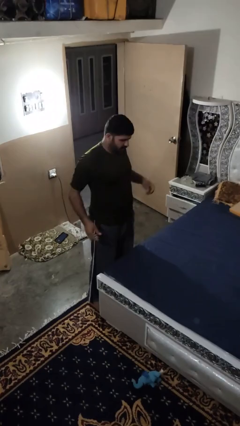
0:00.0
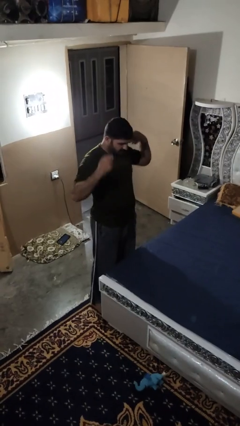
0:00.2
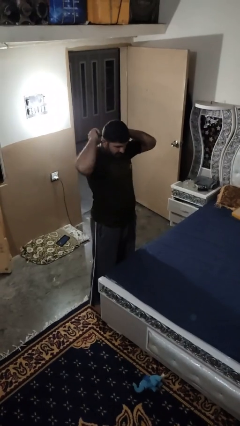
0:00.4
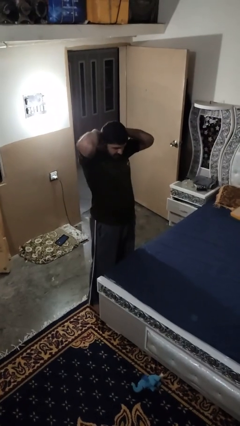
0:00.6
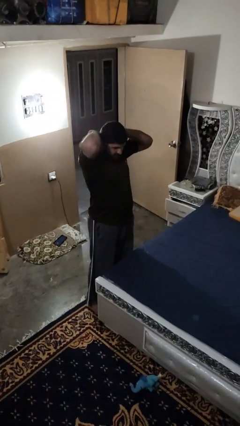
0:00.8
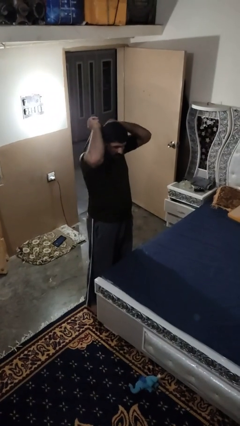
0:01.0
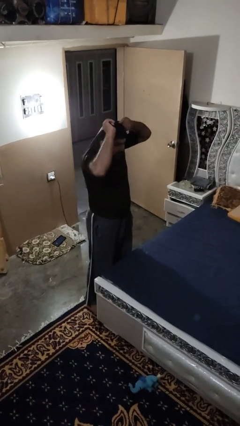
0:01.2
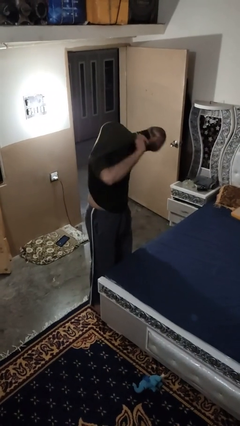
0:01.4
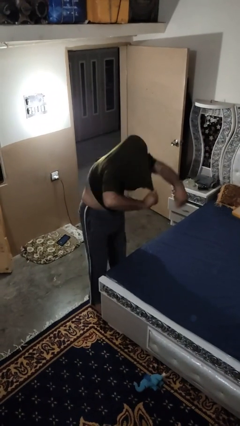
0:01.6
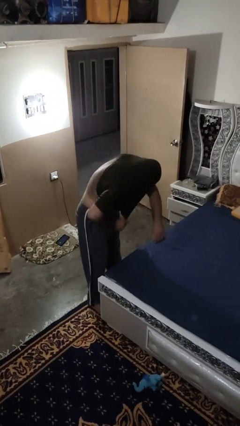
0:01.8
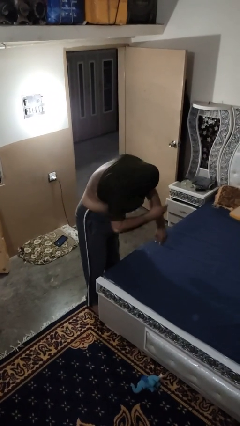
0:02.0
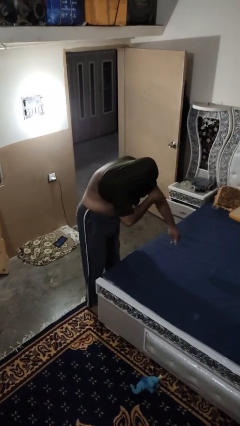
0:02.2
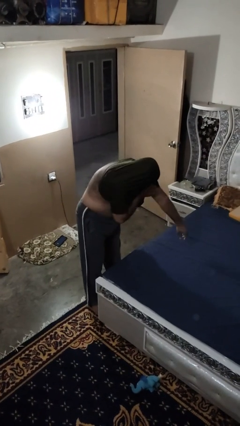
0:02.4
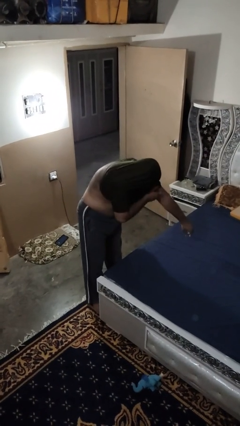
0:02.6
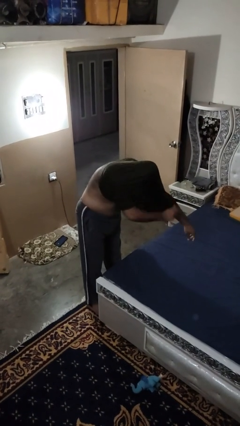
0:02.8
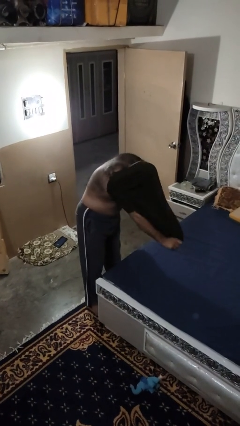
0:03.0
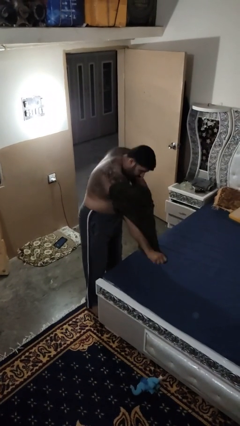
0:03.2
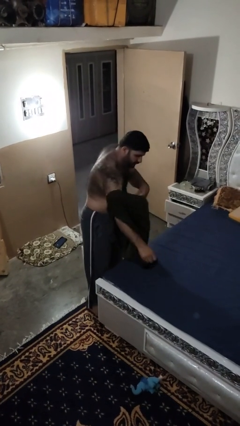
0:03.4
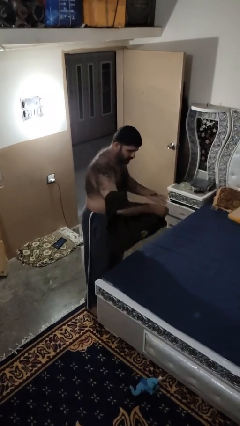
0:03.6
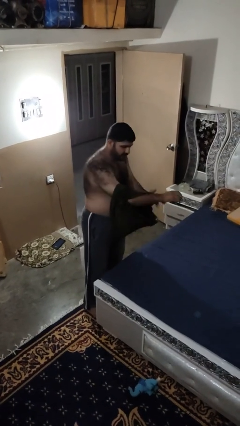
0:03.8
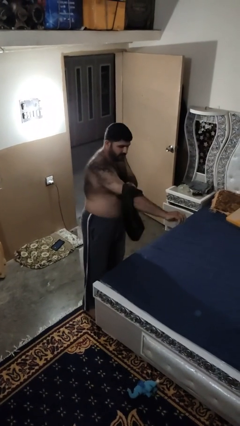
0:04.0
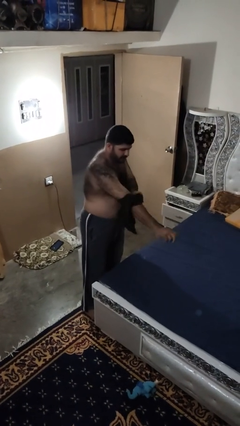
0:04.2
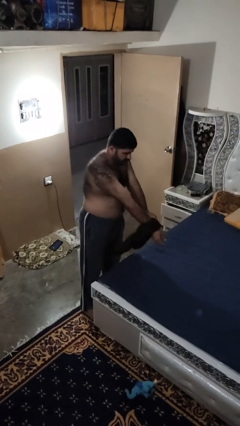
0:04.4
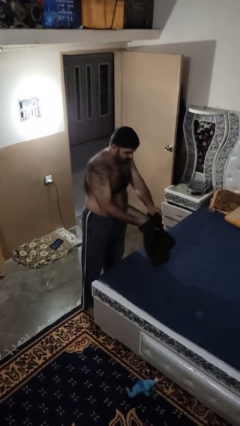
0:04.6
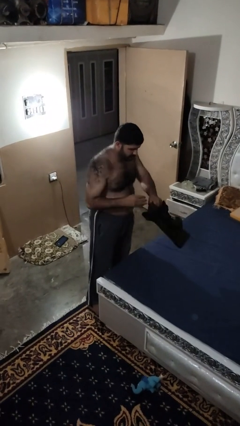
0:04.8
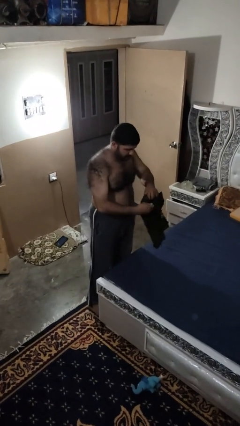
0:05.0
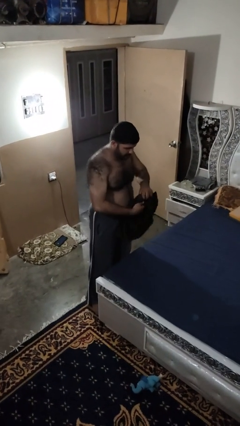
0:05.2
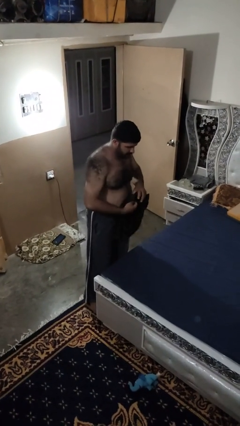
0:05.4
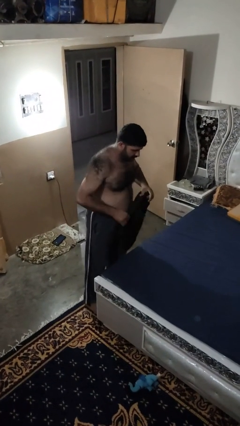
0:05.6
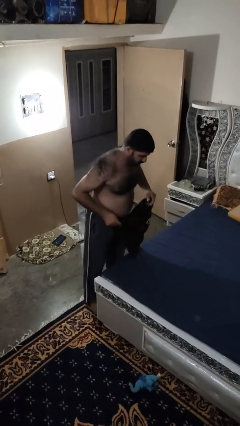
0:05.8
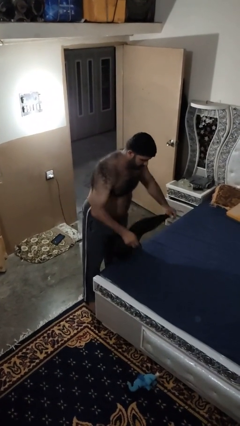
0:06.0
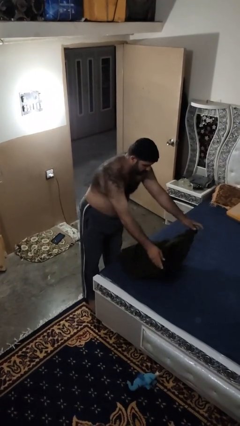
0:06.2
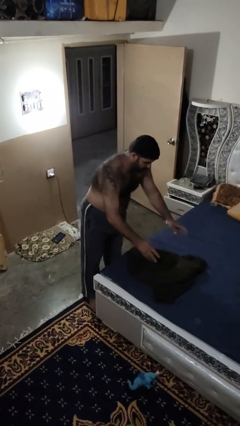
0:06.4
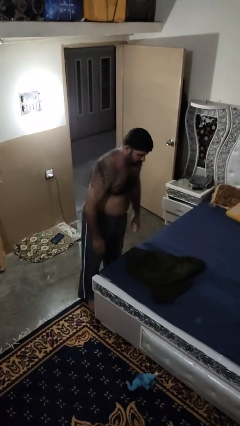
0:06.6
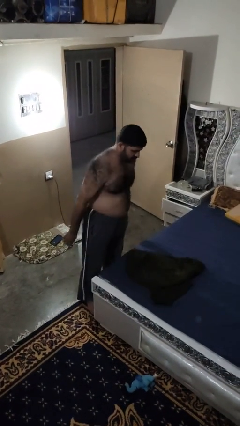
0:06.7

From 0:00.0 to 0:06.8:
person takes off shirt

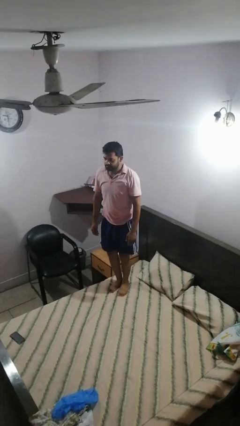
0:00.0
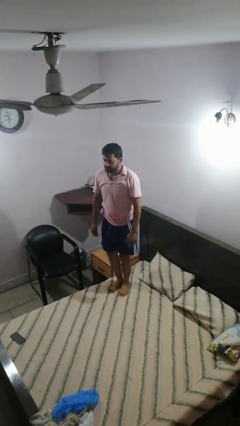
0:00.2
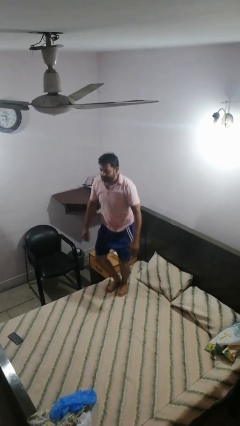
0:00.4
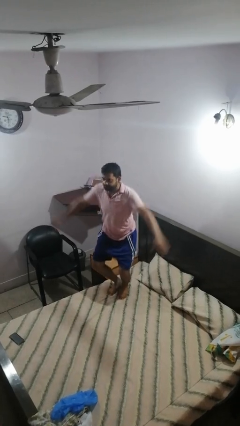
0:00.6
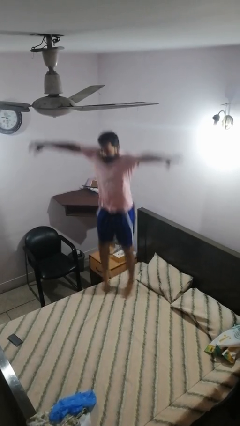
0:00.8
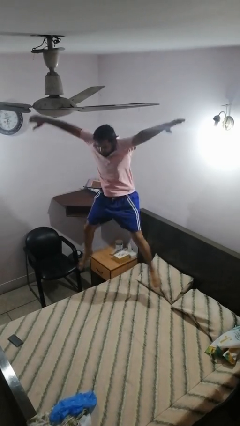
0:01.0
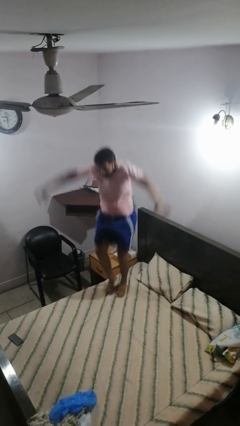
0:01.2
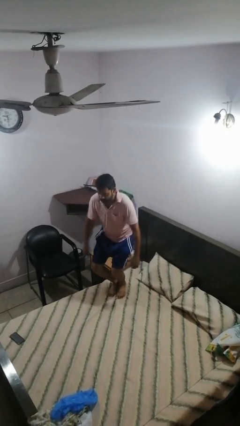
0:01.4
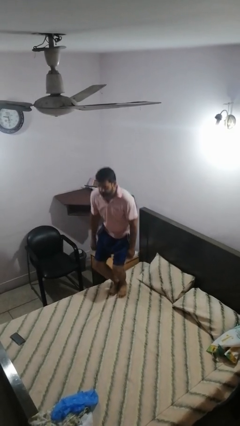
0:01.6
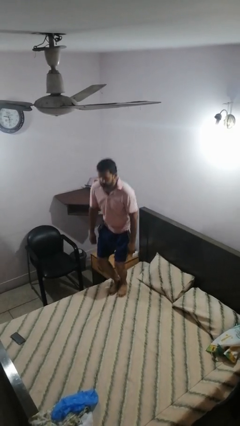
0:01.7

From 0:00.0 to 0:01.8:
person jumps on bed

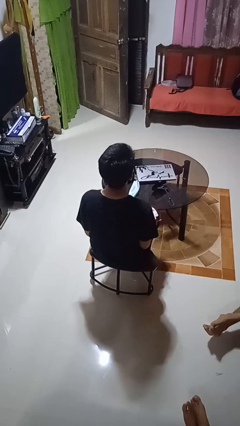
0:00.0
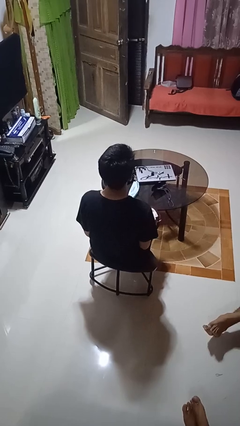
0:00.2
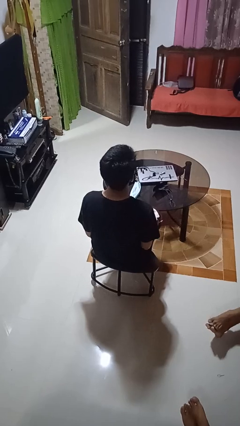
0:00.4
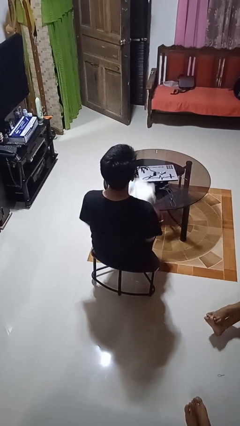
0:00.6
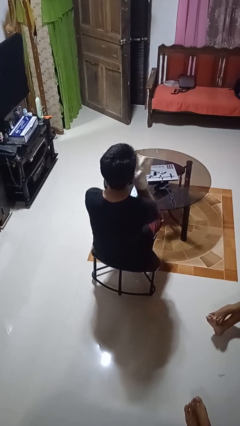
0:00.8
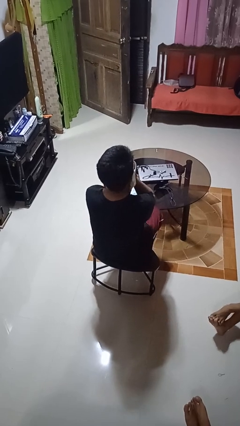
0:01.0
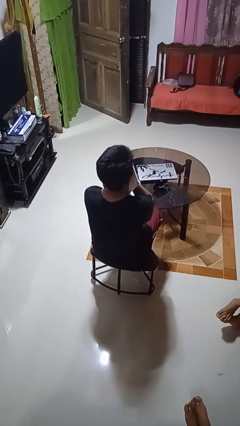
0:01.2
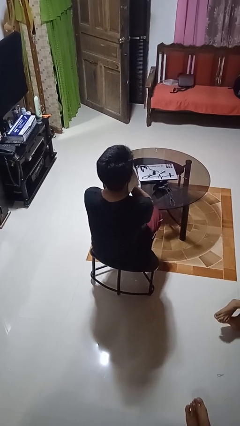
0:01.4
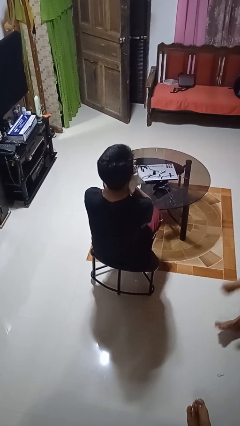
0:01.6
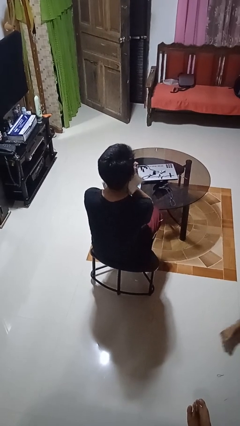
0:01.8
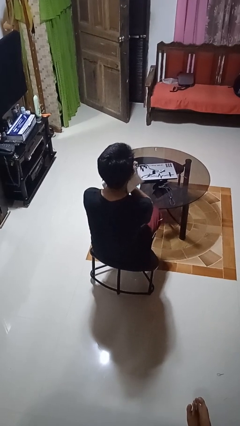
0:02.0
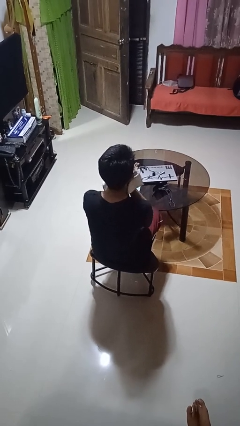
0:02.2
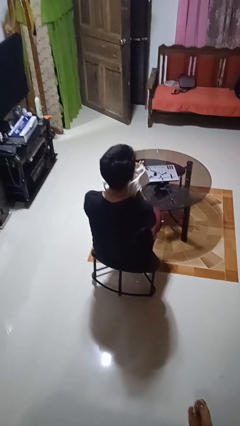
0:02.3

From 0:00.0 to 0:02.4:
person wipes mouth with napkin

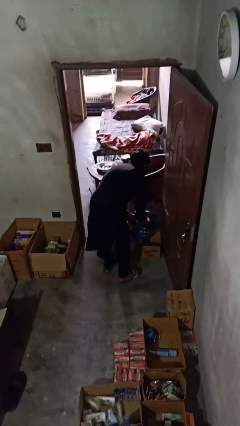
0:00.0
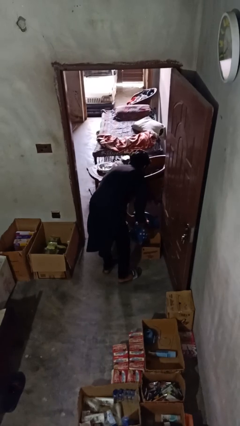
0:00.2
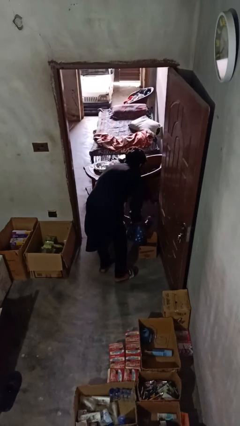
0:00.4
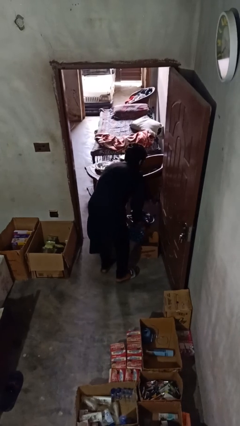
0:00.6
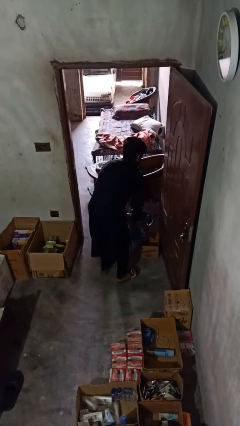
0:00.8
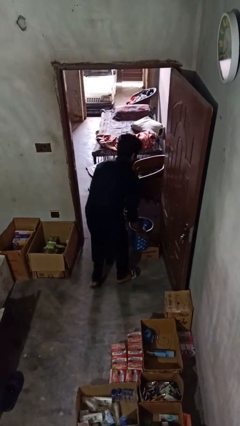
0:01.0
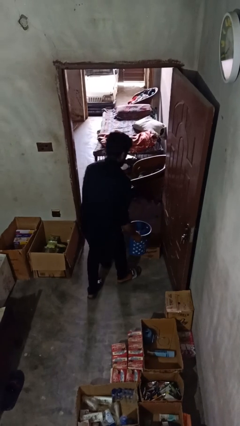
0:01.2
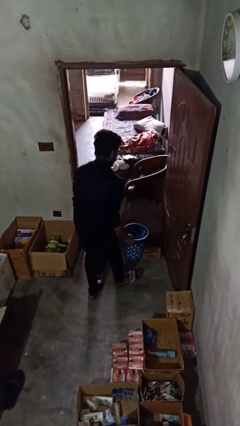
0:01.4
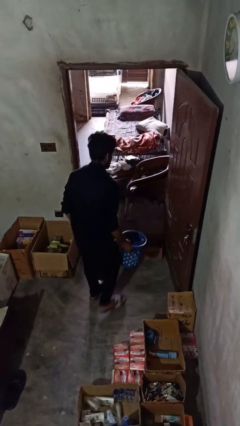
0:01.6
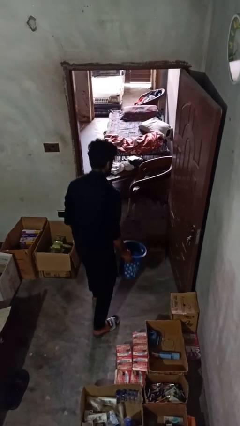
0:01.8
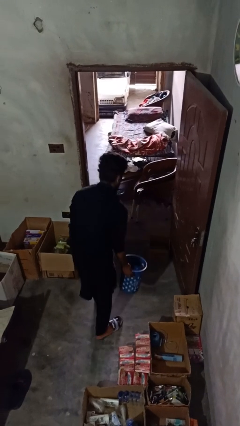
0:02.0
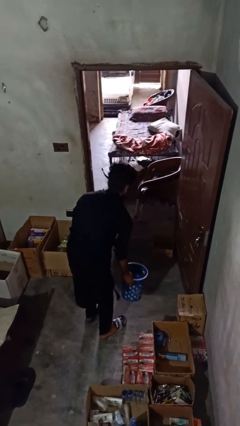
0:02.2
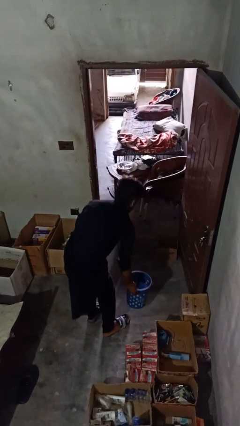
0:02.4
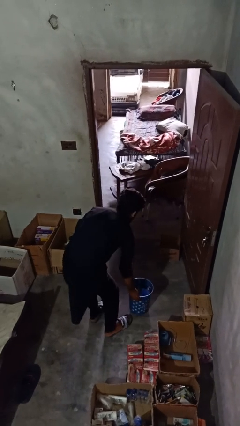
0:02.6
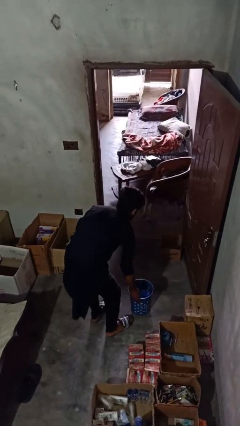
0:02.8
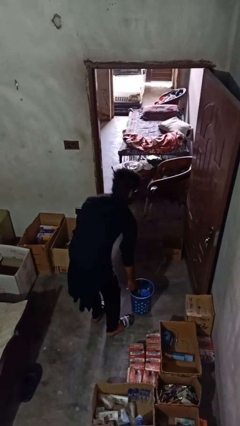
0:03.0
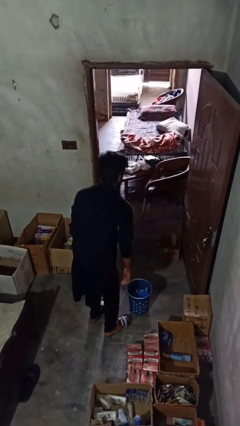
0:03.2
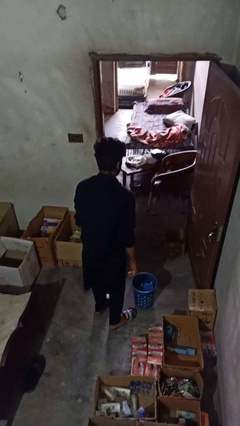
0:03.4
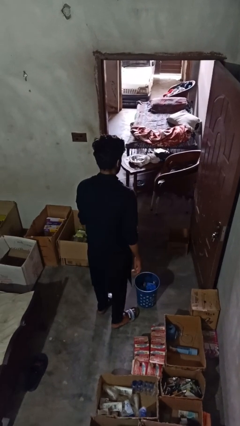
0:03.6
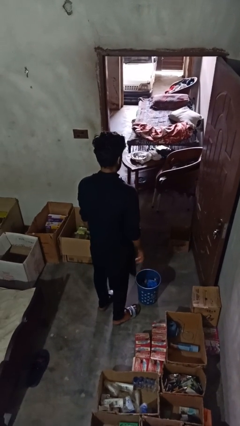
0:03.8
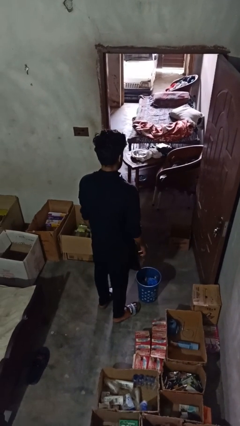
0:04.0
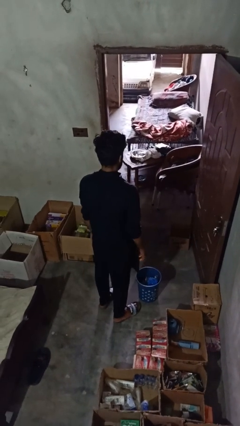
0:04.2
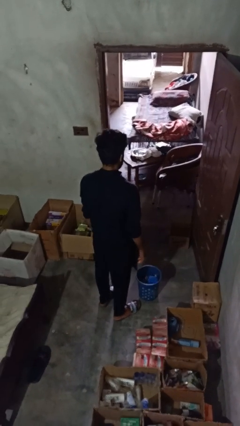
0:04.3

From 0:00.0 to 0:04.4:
person inserts trashbag into trashcan

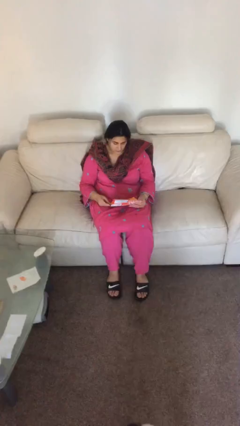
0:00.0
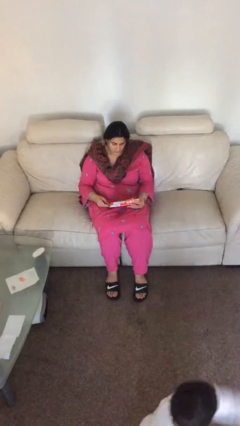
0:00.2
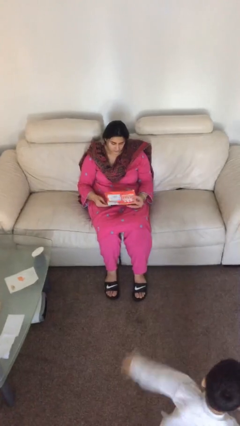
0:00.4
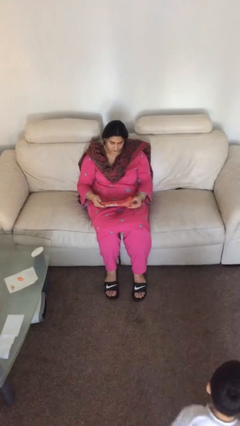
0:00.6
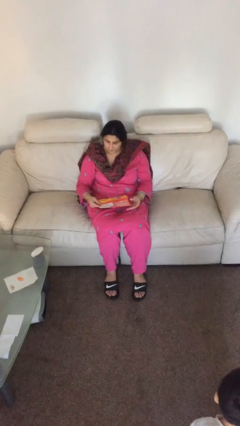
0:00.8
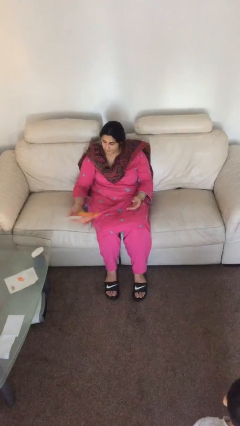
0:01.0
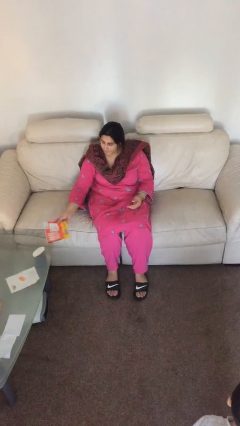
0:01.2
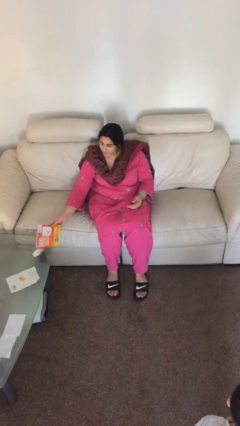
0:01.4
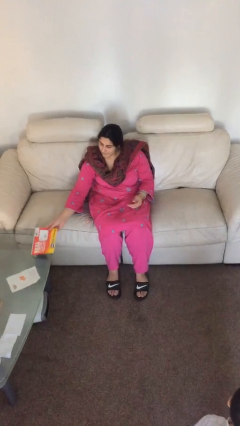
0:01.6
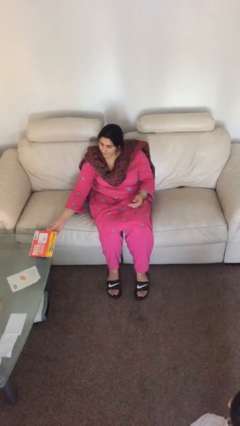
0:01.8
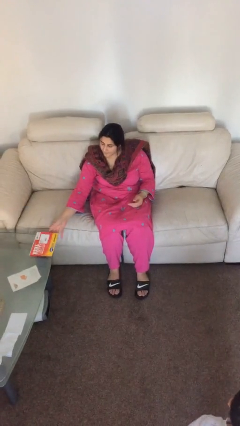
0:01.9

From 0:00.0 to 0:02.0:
person puts down object on table

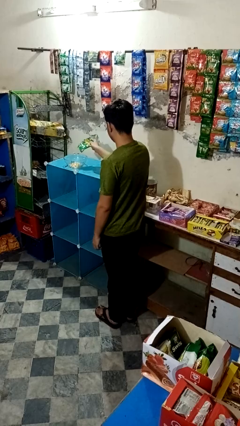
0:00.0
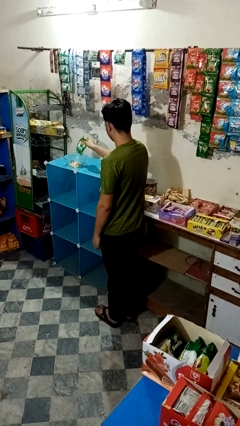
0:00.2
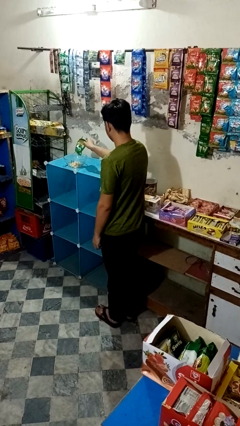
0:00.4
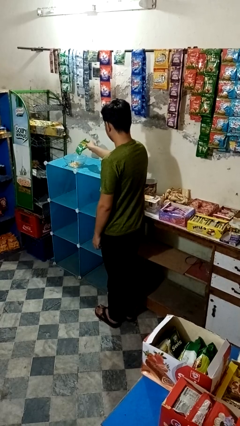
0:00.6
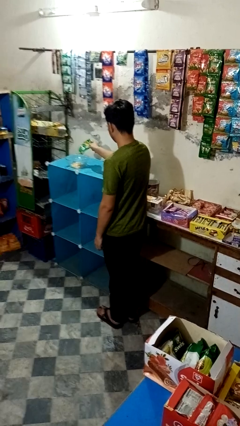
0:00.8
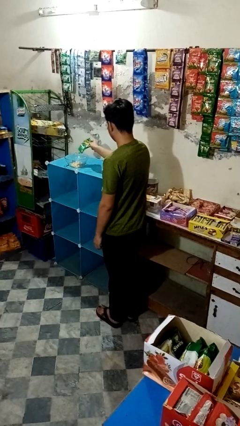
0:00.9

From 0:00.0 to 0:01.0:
person pours into bowl
